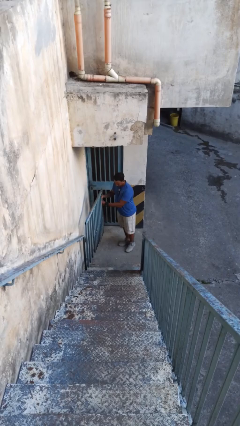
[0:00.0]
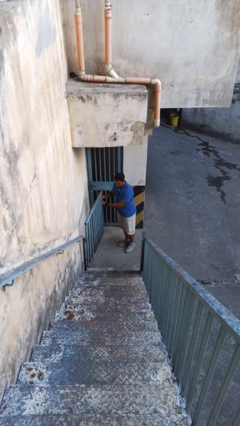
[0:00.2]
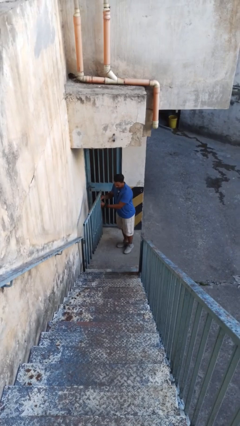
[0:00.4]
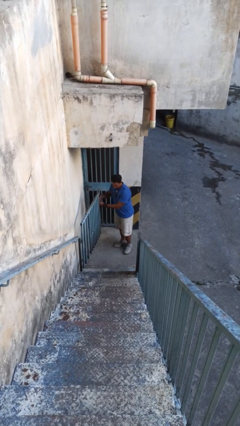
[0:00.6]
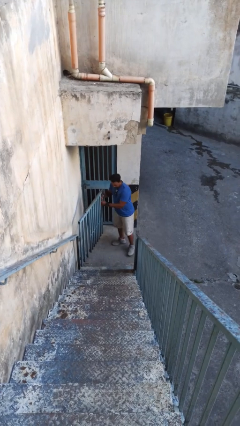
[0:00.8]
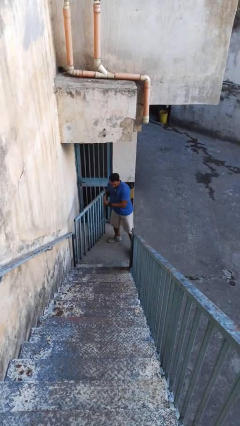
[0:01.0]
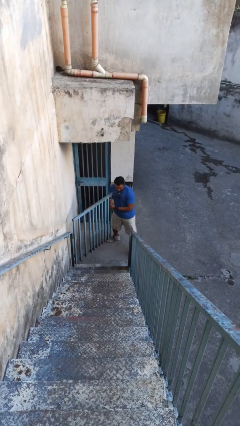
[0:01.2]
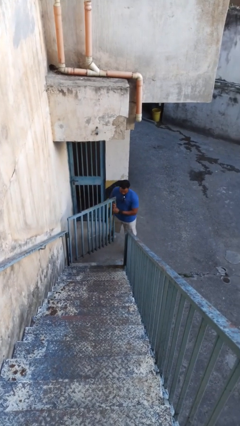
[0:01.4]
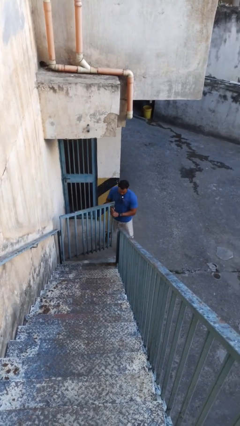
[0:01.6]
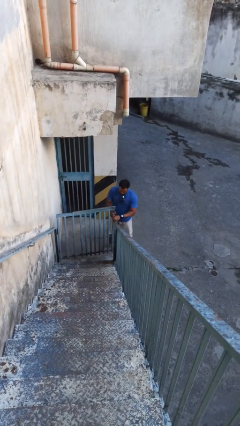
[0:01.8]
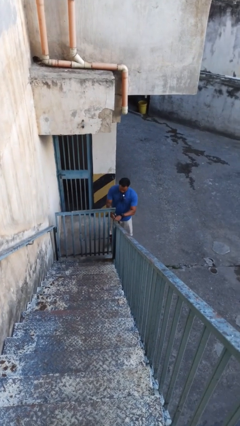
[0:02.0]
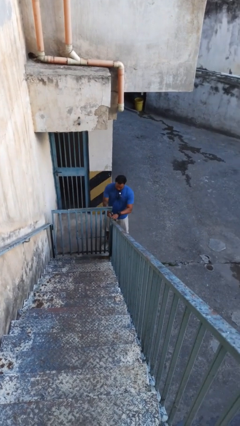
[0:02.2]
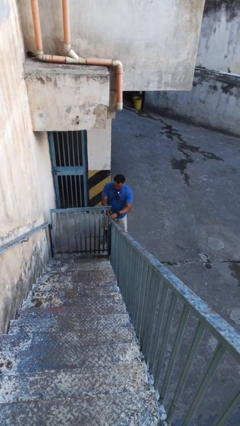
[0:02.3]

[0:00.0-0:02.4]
person closes facility door

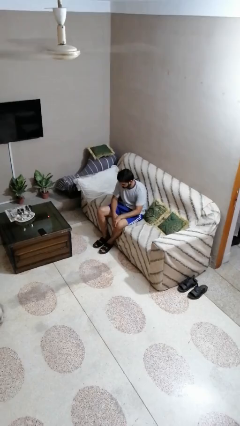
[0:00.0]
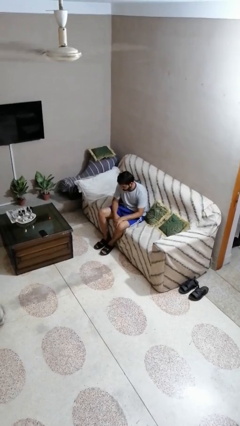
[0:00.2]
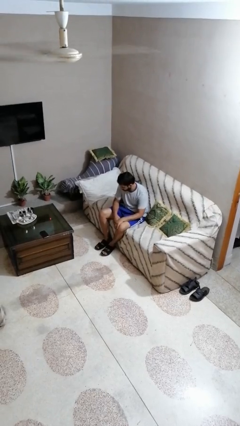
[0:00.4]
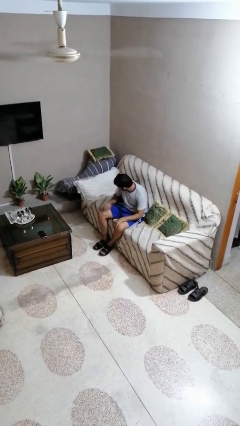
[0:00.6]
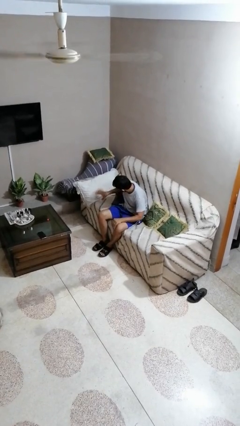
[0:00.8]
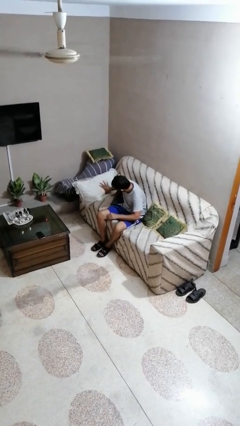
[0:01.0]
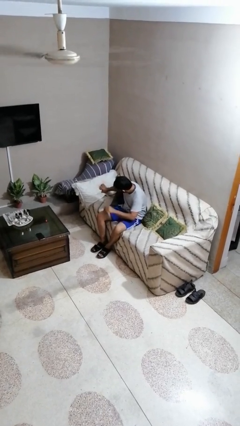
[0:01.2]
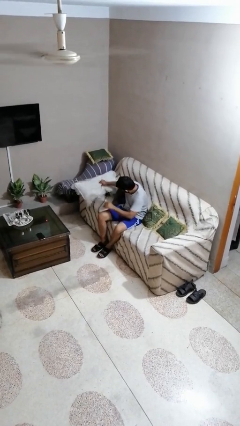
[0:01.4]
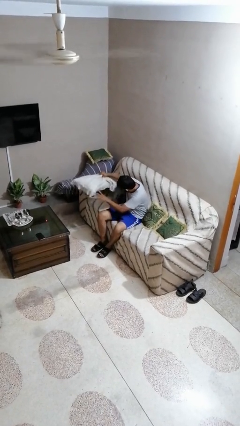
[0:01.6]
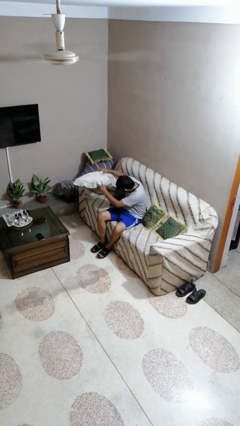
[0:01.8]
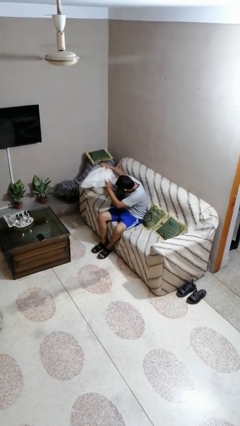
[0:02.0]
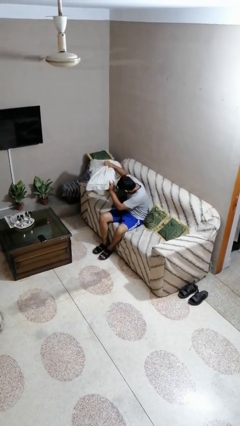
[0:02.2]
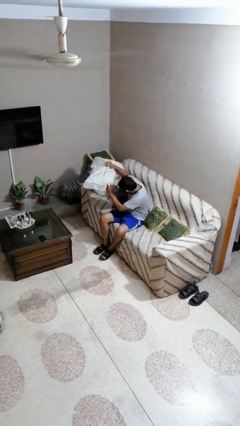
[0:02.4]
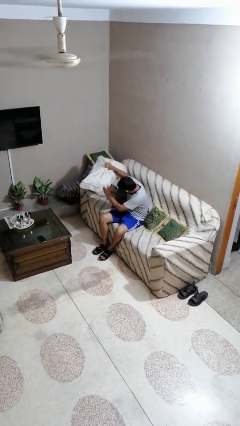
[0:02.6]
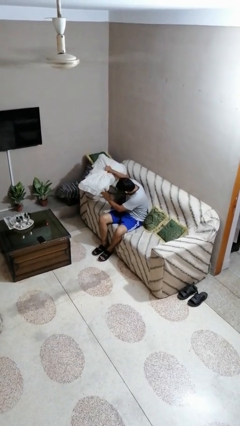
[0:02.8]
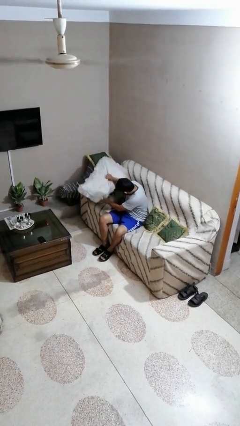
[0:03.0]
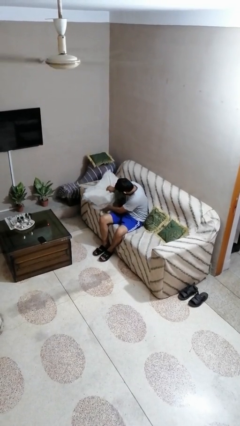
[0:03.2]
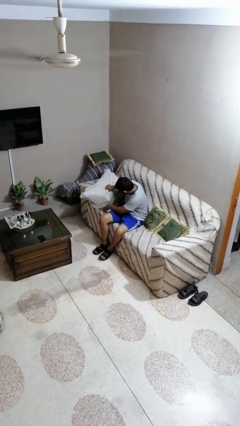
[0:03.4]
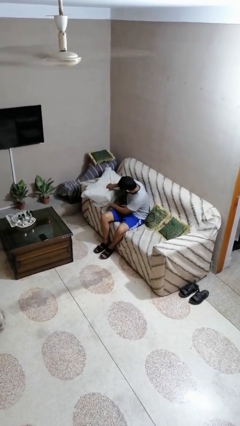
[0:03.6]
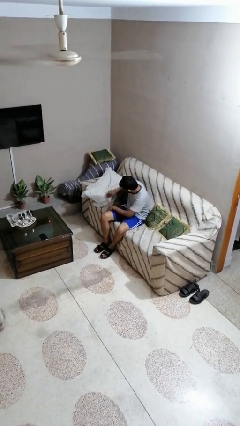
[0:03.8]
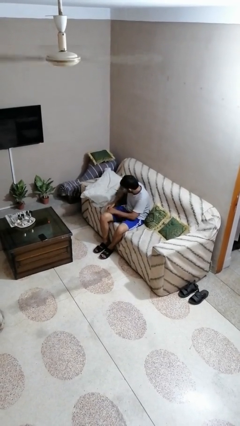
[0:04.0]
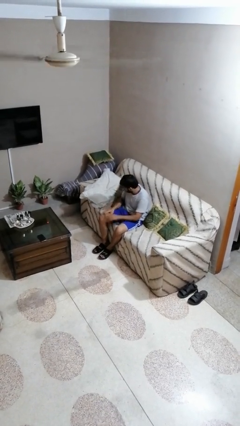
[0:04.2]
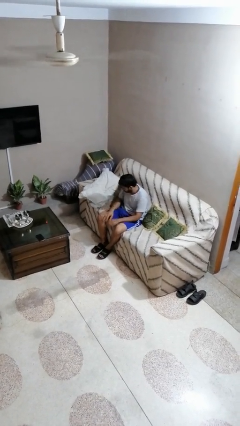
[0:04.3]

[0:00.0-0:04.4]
person searches in couch

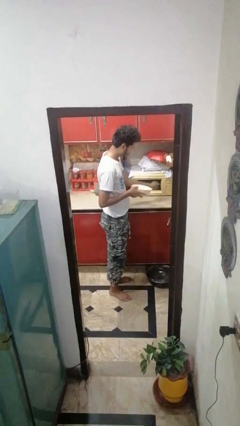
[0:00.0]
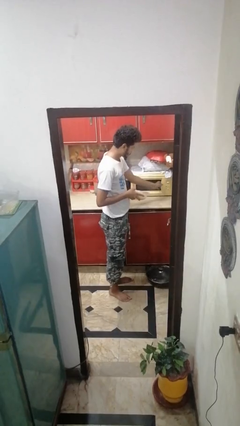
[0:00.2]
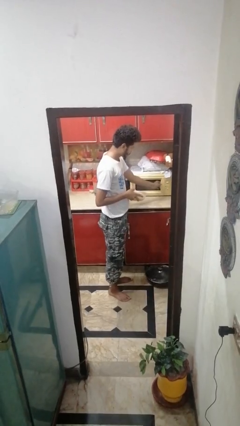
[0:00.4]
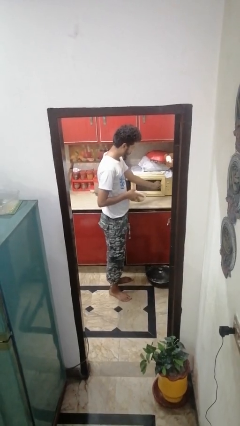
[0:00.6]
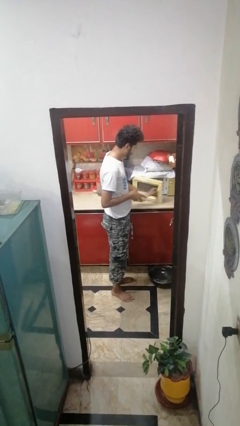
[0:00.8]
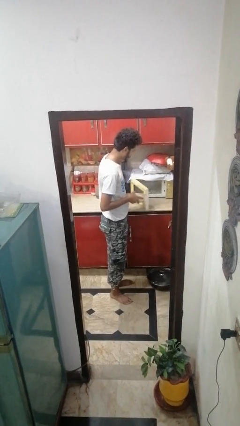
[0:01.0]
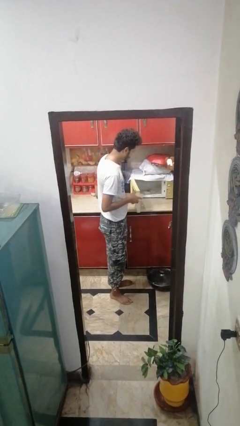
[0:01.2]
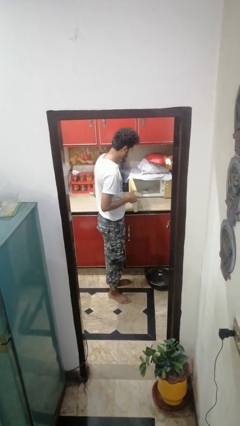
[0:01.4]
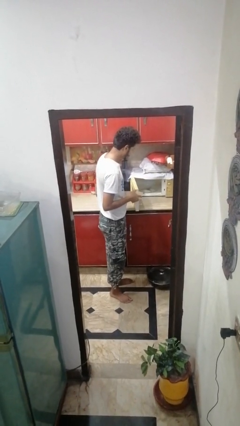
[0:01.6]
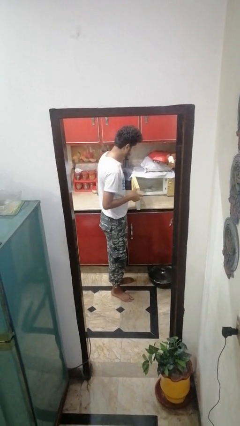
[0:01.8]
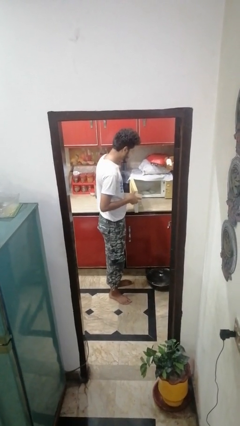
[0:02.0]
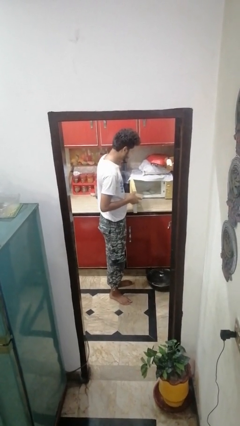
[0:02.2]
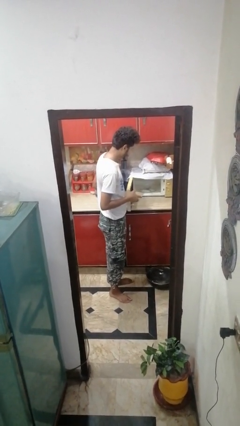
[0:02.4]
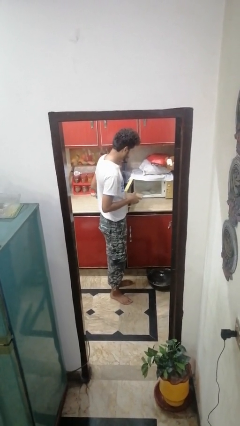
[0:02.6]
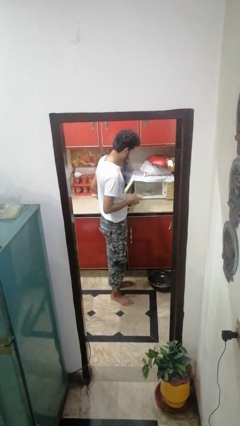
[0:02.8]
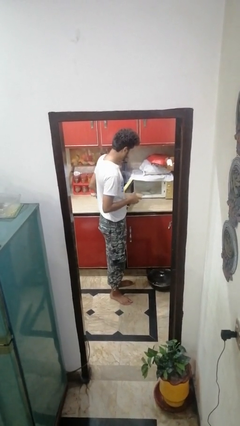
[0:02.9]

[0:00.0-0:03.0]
person opens microwave

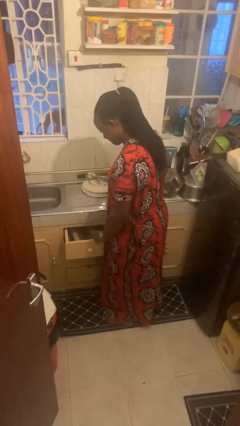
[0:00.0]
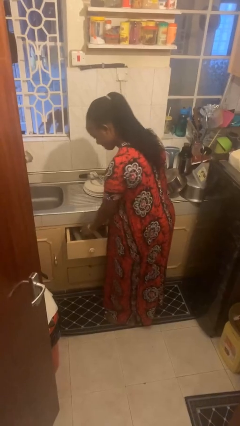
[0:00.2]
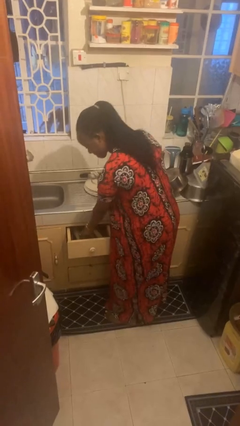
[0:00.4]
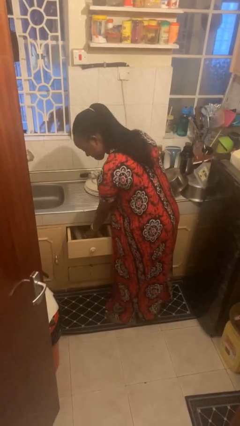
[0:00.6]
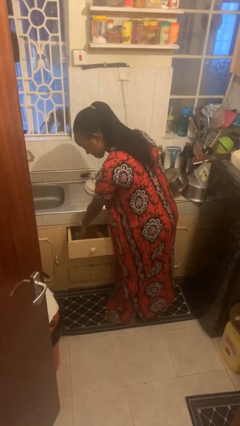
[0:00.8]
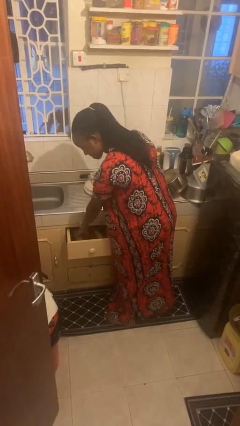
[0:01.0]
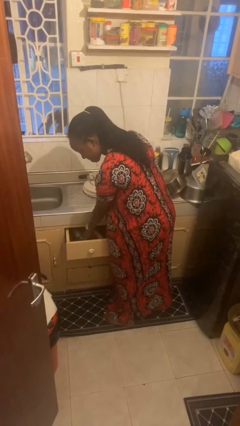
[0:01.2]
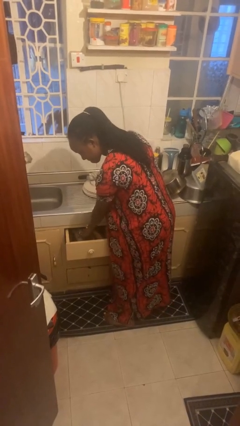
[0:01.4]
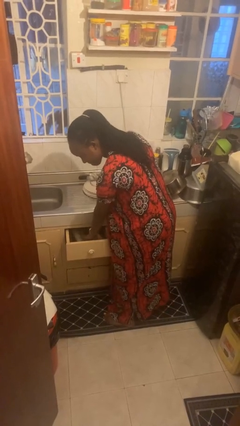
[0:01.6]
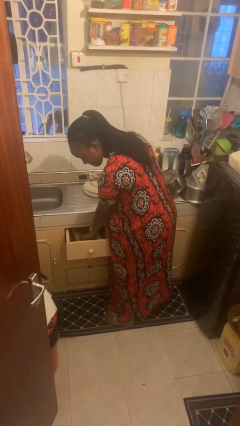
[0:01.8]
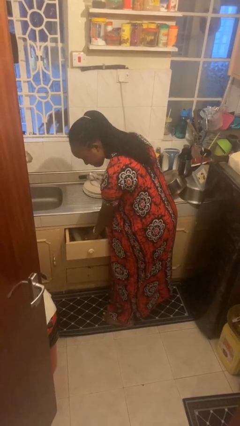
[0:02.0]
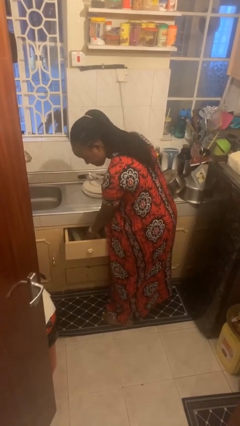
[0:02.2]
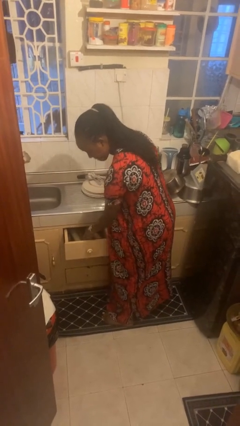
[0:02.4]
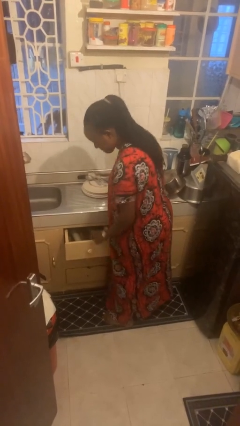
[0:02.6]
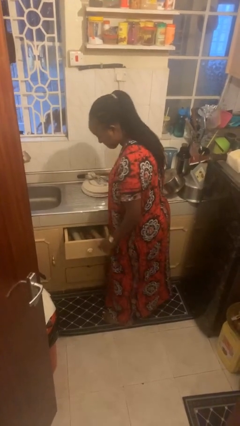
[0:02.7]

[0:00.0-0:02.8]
person searches in kitchen drawer

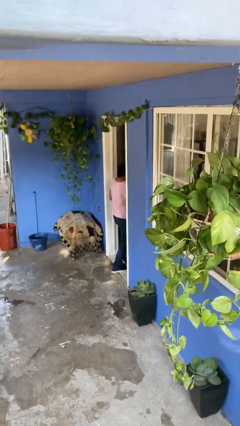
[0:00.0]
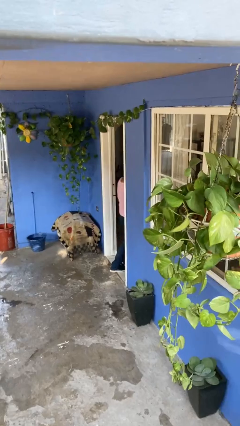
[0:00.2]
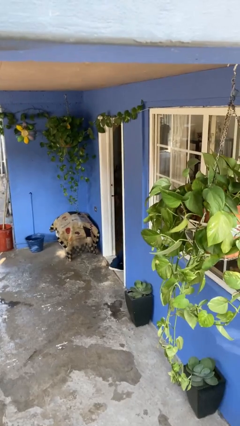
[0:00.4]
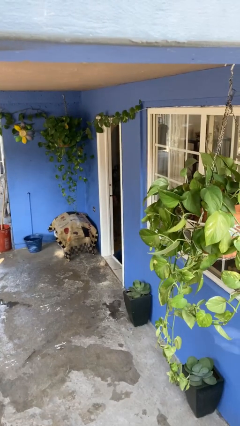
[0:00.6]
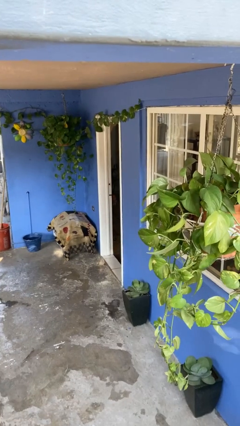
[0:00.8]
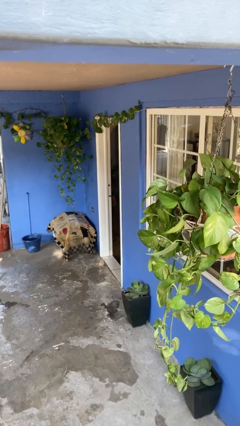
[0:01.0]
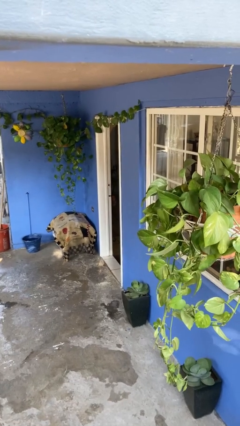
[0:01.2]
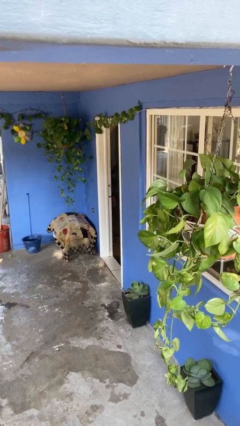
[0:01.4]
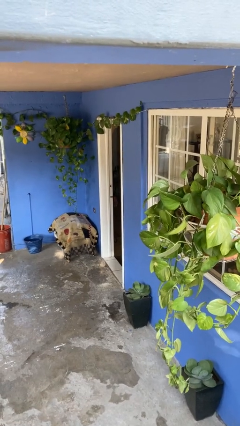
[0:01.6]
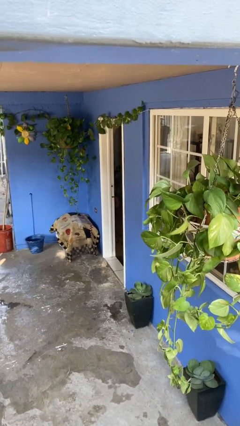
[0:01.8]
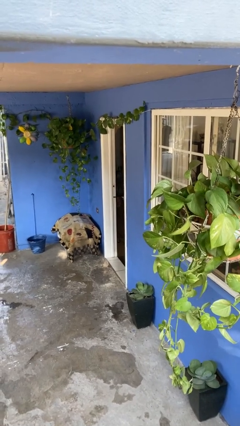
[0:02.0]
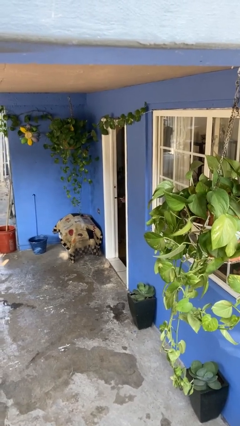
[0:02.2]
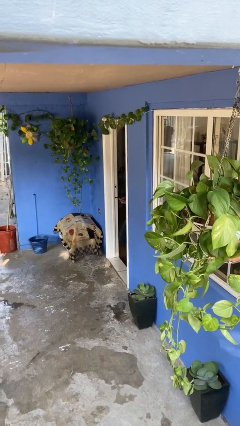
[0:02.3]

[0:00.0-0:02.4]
person exits scene through structure

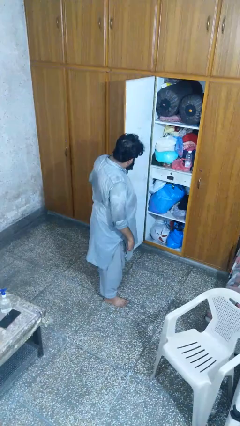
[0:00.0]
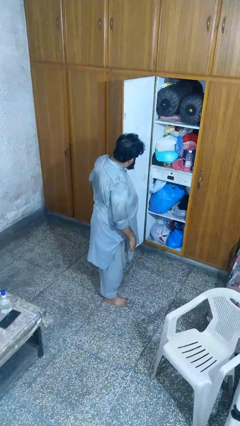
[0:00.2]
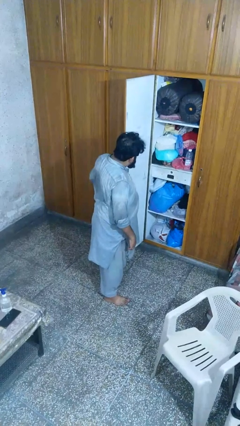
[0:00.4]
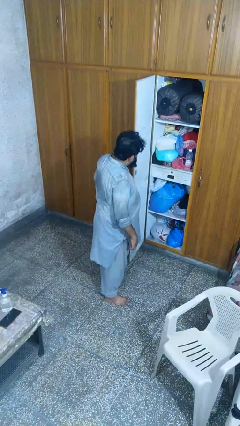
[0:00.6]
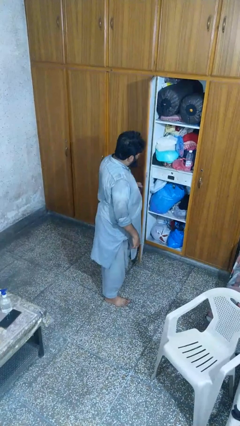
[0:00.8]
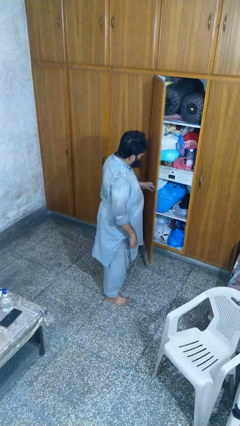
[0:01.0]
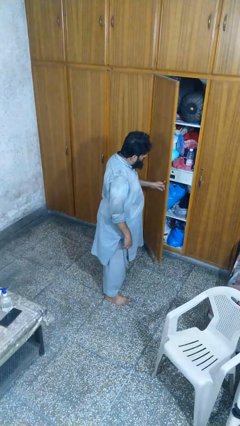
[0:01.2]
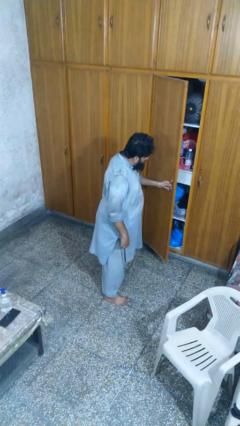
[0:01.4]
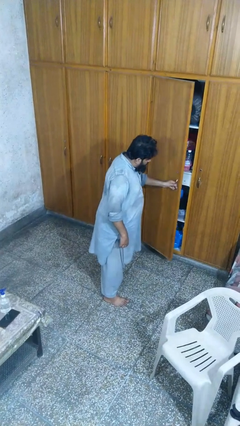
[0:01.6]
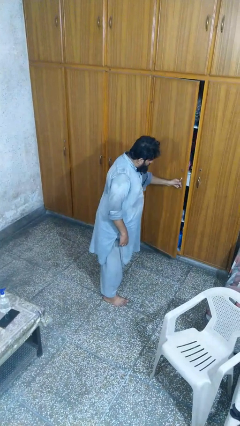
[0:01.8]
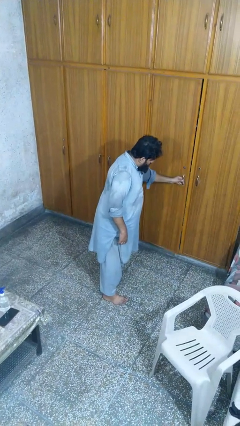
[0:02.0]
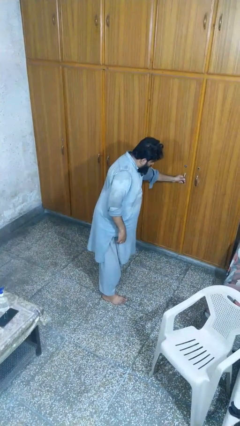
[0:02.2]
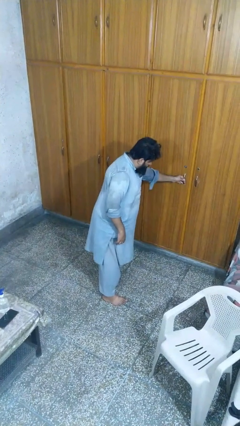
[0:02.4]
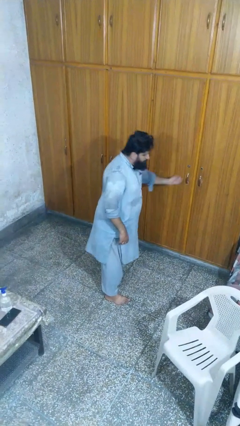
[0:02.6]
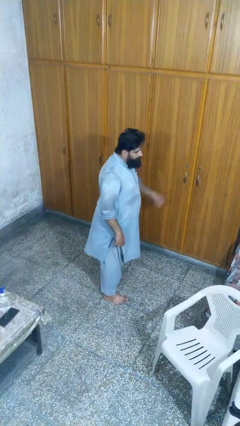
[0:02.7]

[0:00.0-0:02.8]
person closes closet door
